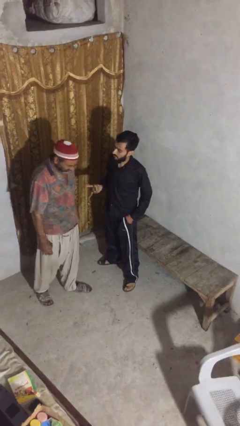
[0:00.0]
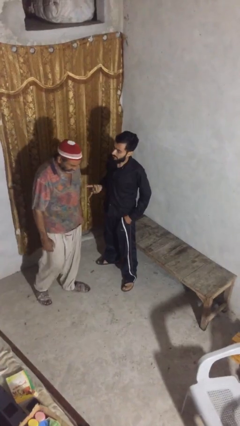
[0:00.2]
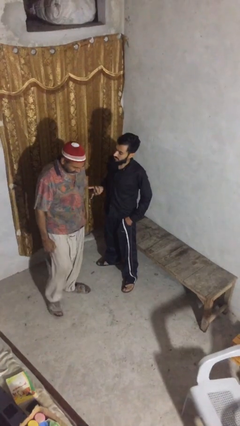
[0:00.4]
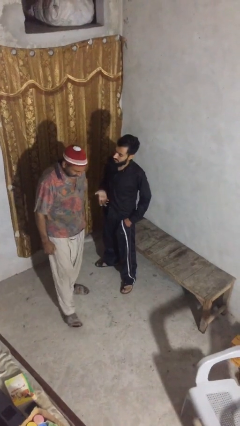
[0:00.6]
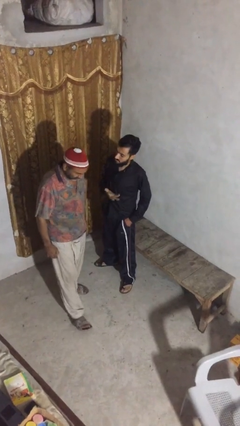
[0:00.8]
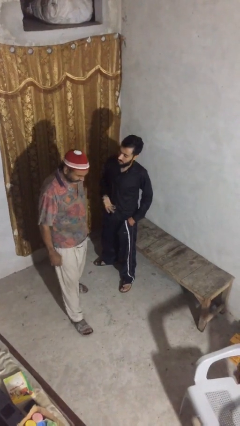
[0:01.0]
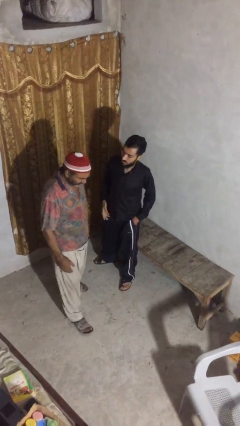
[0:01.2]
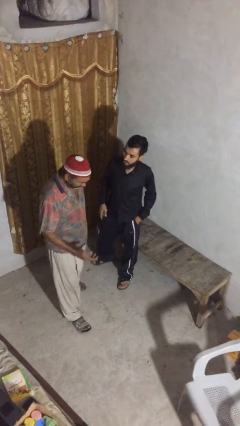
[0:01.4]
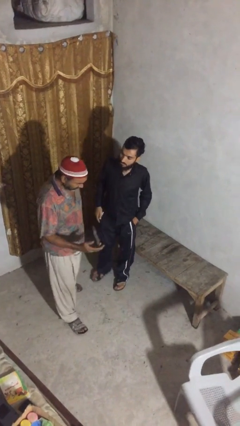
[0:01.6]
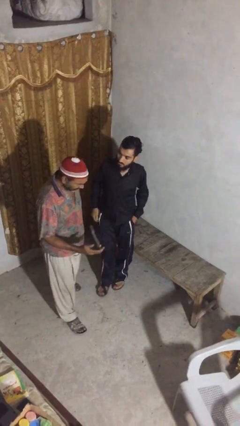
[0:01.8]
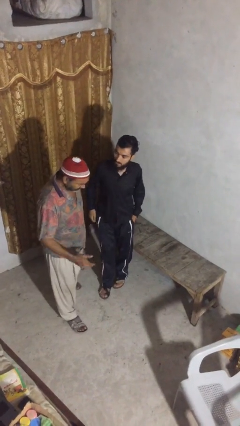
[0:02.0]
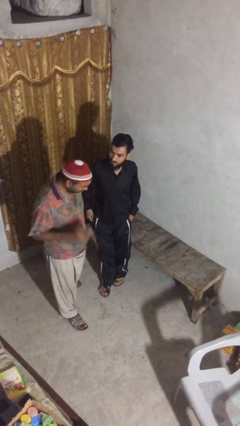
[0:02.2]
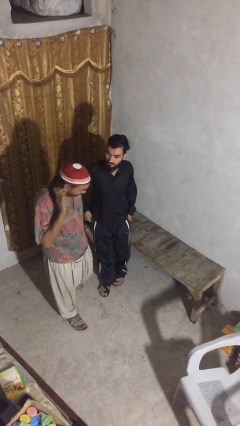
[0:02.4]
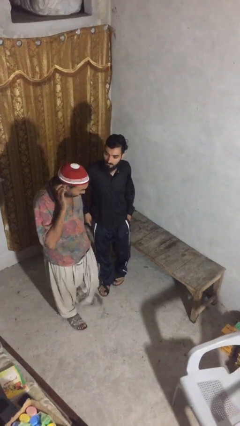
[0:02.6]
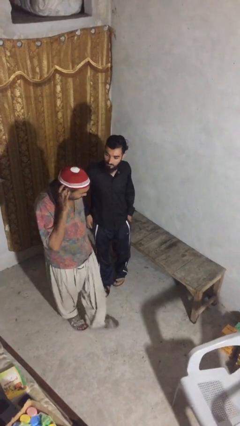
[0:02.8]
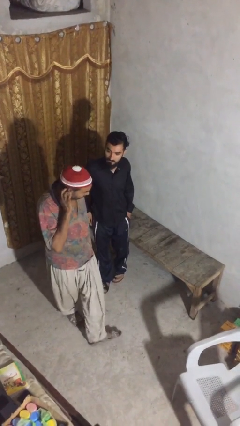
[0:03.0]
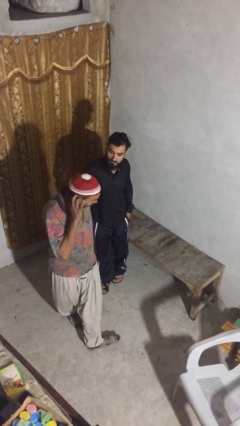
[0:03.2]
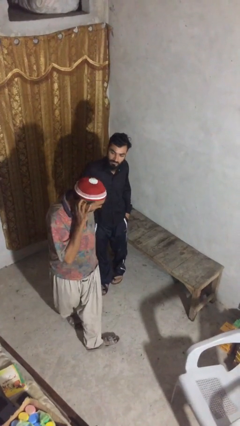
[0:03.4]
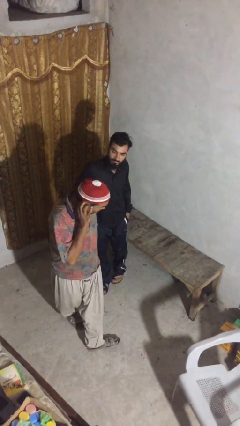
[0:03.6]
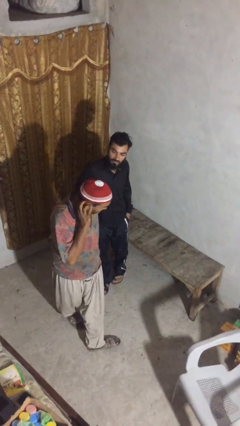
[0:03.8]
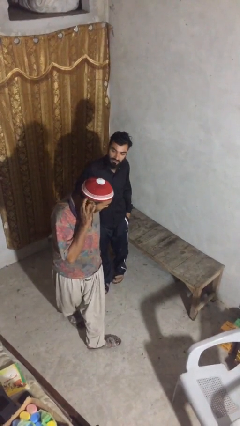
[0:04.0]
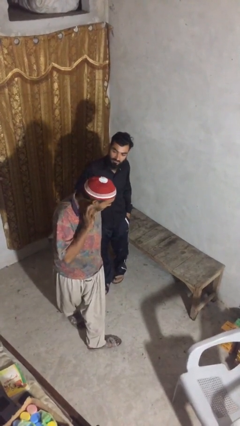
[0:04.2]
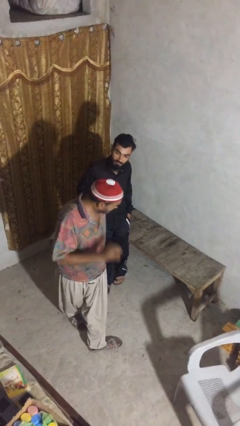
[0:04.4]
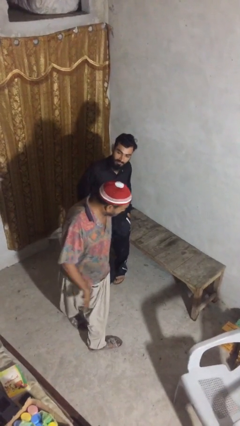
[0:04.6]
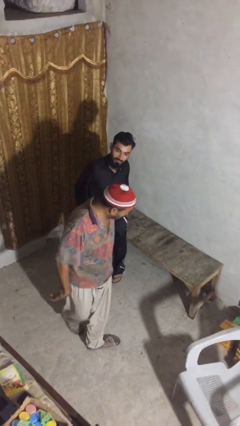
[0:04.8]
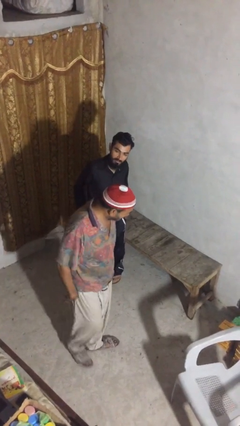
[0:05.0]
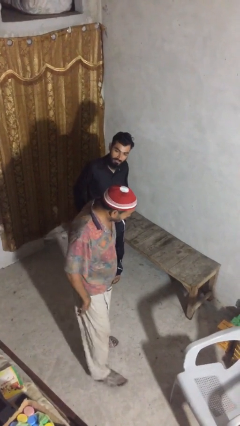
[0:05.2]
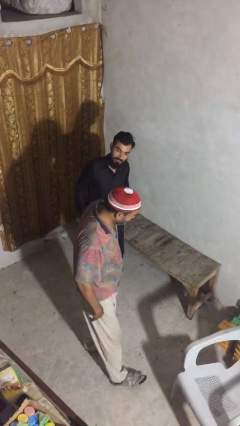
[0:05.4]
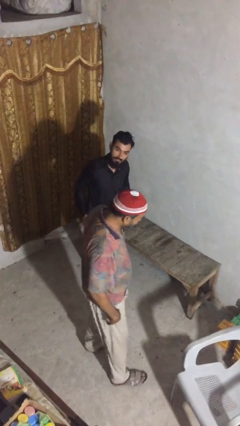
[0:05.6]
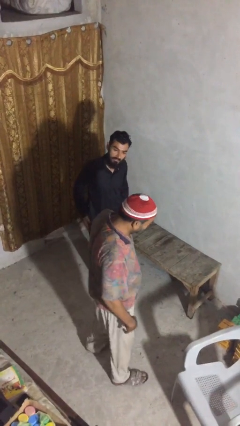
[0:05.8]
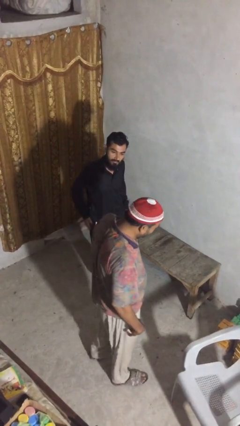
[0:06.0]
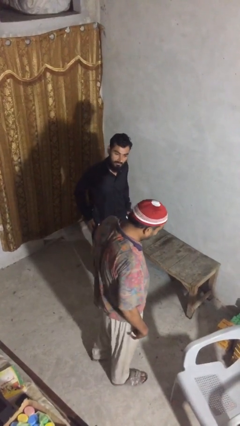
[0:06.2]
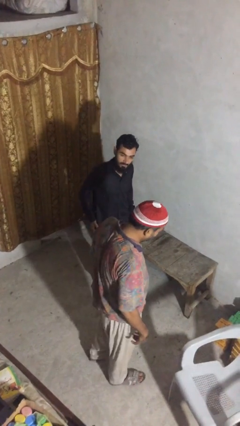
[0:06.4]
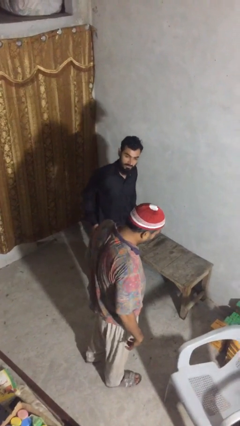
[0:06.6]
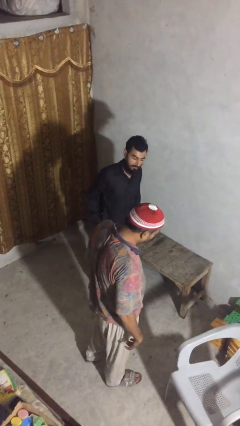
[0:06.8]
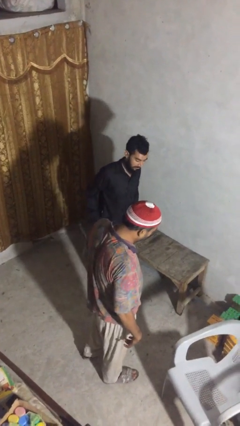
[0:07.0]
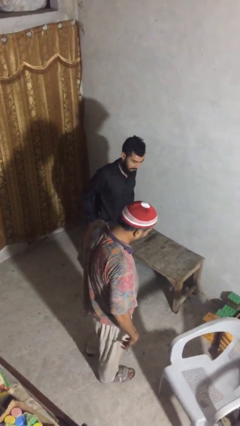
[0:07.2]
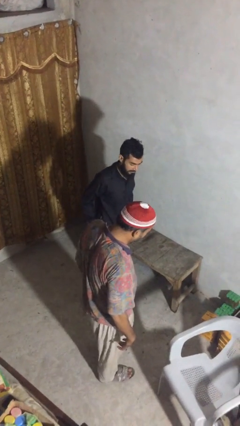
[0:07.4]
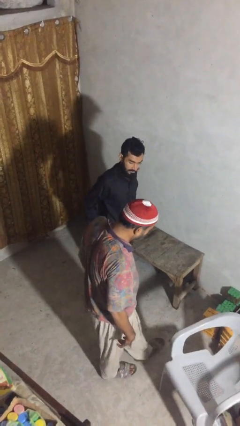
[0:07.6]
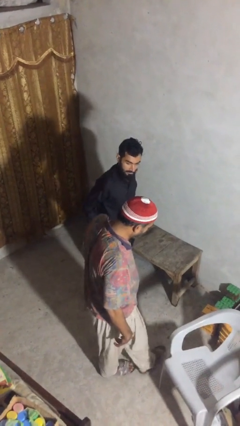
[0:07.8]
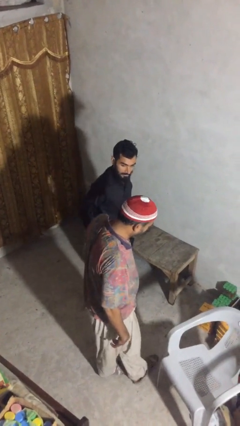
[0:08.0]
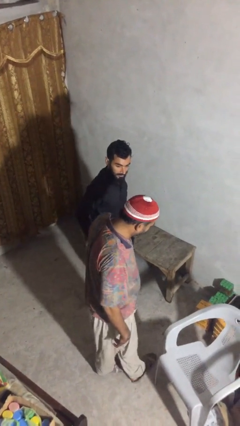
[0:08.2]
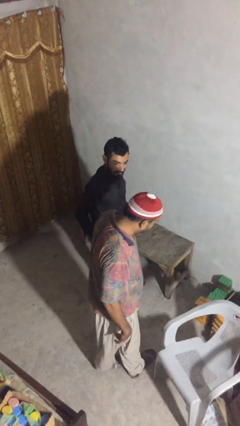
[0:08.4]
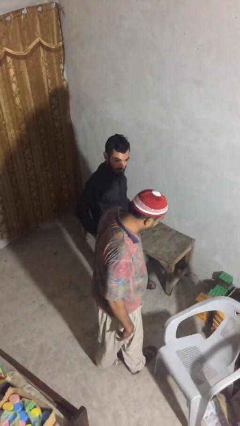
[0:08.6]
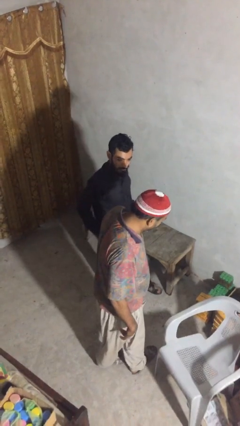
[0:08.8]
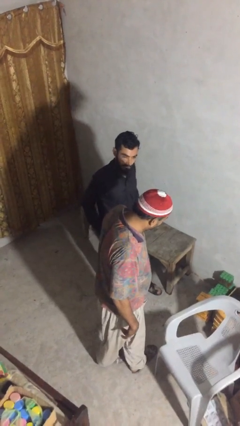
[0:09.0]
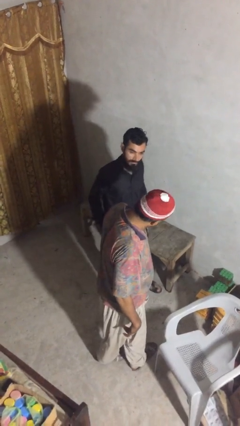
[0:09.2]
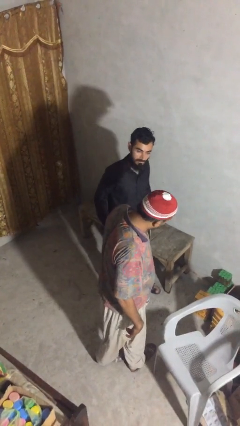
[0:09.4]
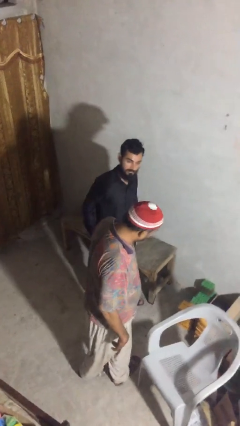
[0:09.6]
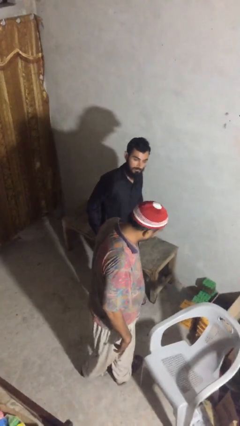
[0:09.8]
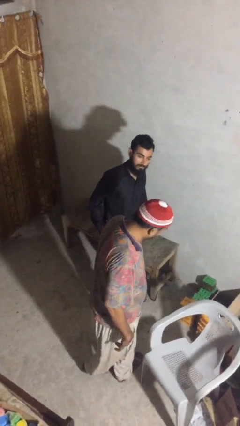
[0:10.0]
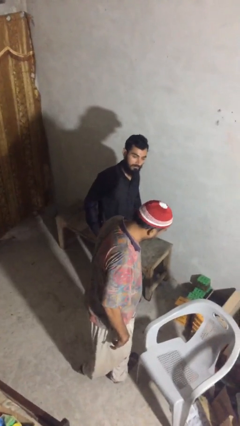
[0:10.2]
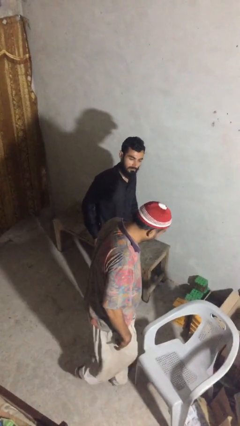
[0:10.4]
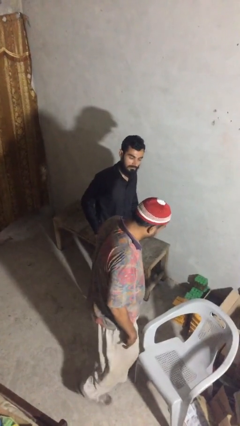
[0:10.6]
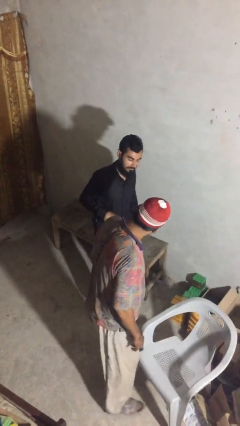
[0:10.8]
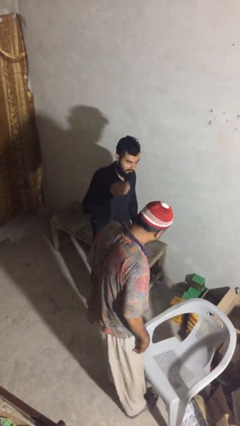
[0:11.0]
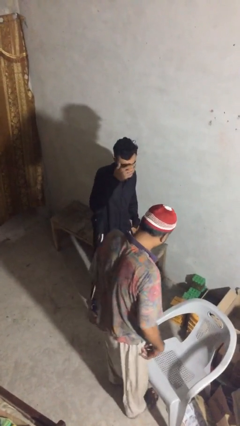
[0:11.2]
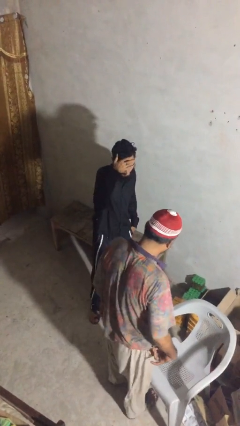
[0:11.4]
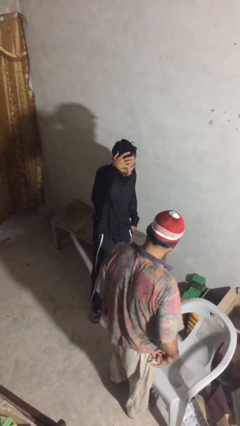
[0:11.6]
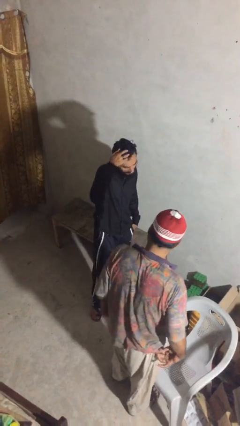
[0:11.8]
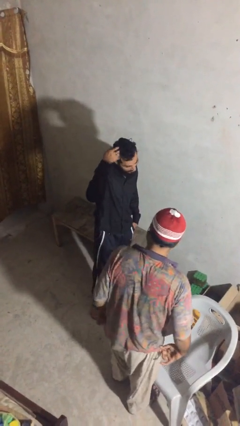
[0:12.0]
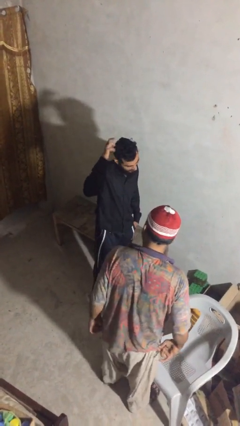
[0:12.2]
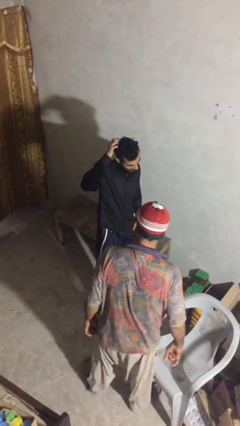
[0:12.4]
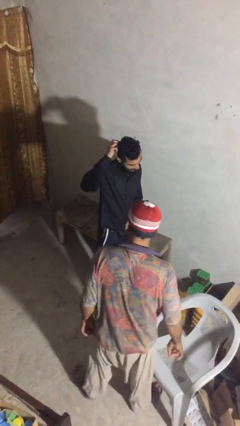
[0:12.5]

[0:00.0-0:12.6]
person talks to person

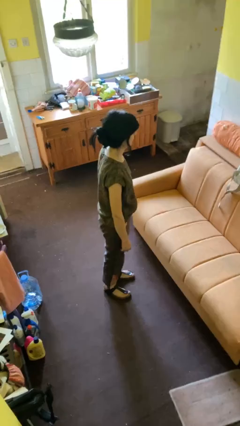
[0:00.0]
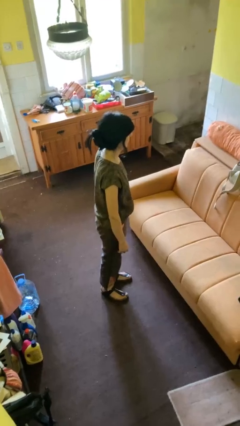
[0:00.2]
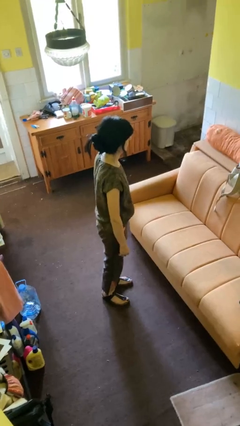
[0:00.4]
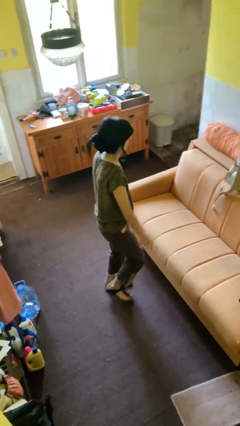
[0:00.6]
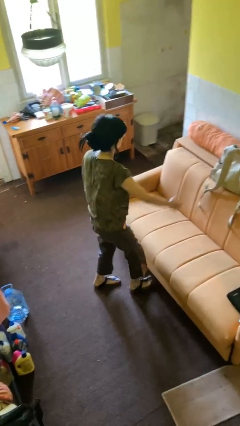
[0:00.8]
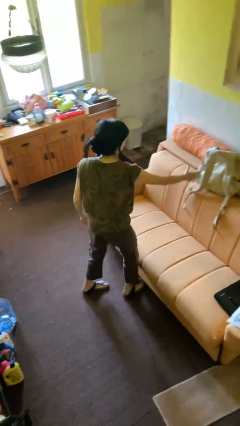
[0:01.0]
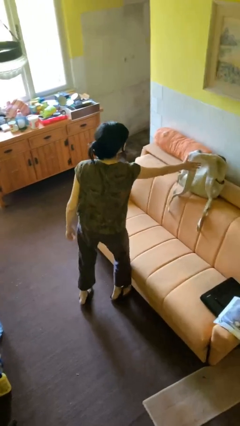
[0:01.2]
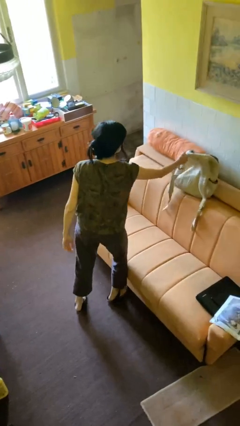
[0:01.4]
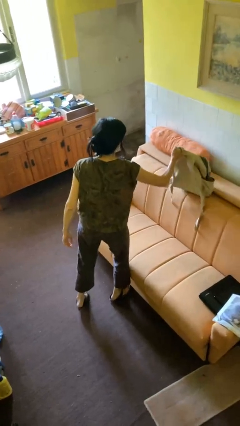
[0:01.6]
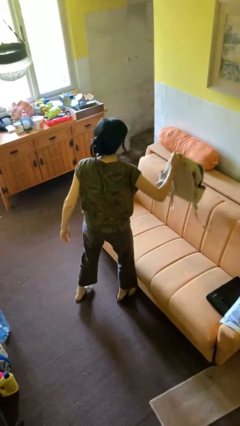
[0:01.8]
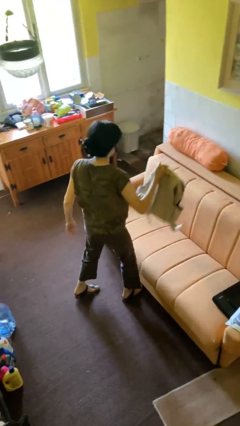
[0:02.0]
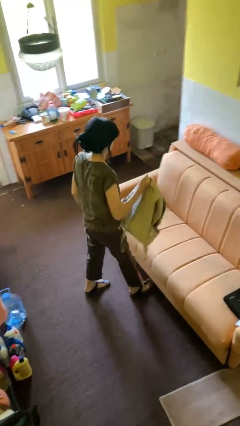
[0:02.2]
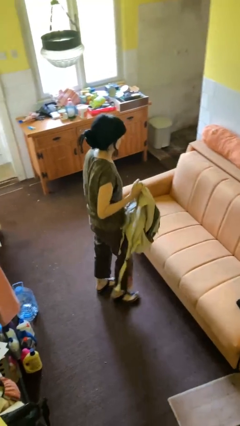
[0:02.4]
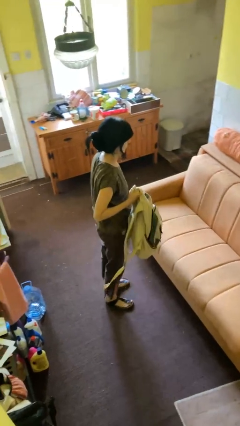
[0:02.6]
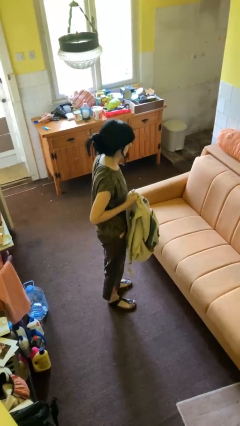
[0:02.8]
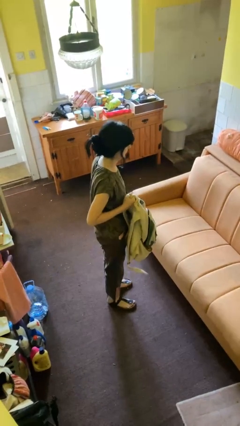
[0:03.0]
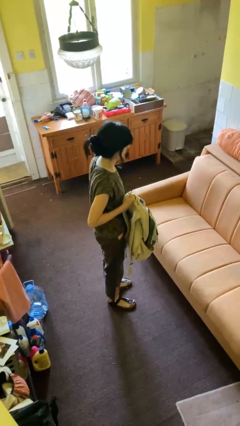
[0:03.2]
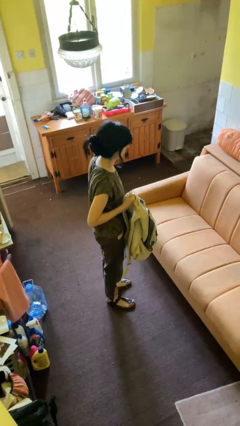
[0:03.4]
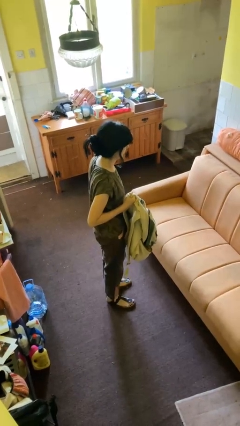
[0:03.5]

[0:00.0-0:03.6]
person picks up object from couch

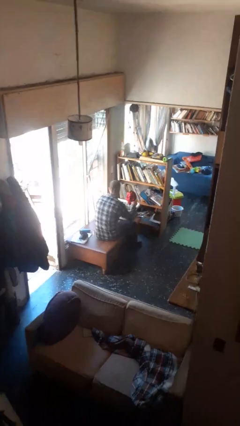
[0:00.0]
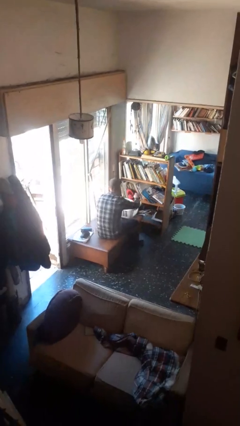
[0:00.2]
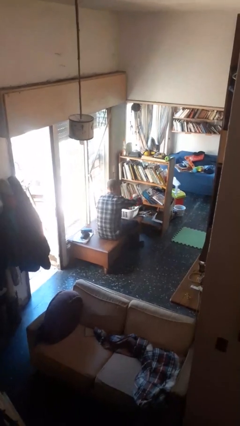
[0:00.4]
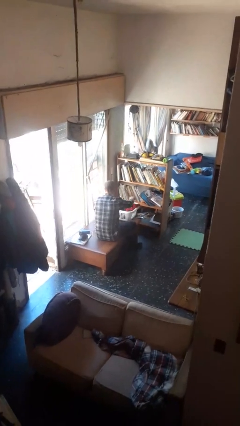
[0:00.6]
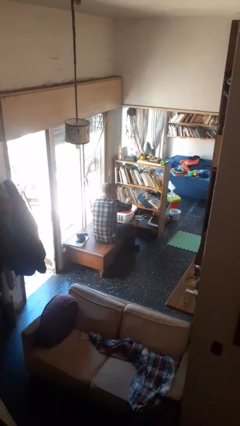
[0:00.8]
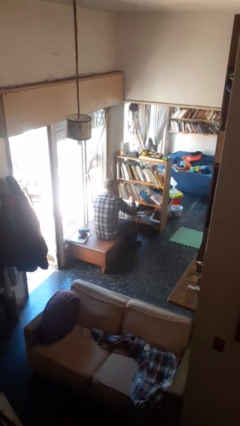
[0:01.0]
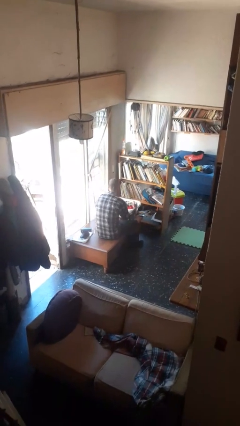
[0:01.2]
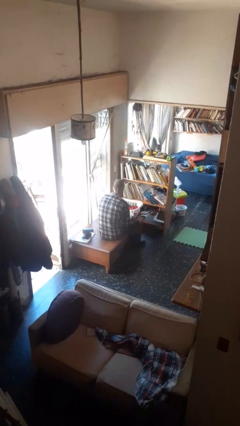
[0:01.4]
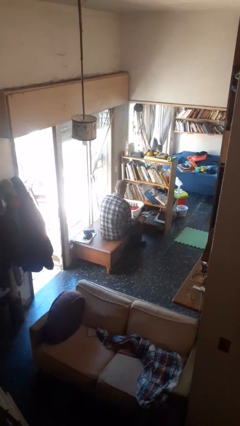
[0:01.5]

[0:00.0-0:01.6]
person puts object into basket
